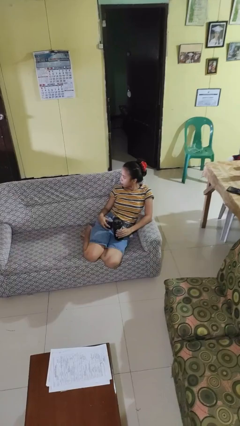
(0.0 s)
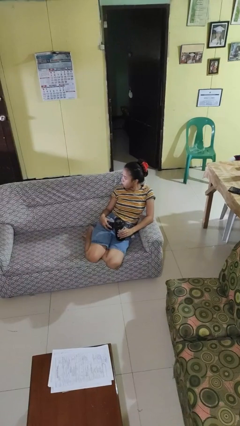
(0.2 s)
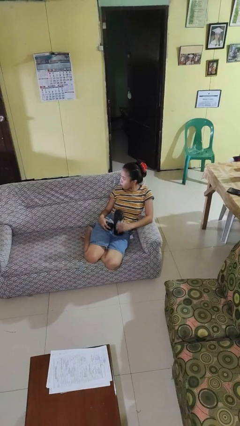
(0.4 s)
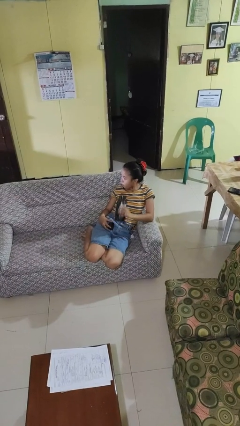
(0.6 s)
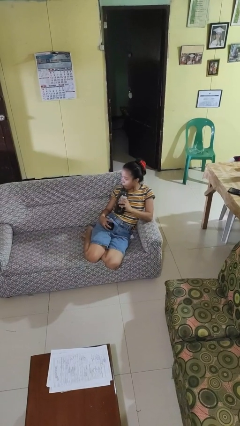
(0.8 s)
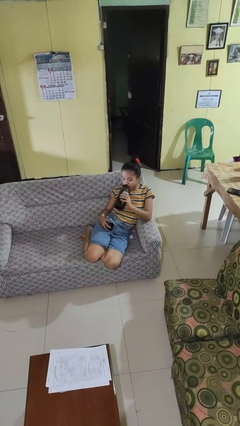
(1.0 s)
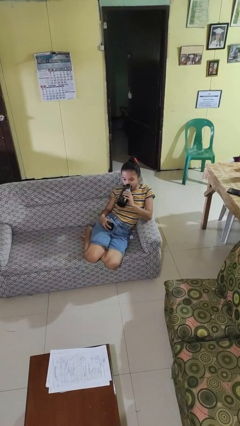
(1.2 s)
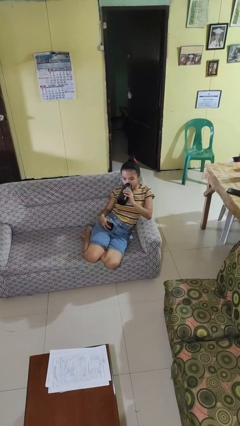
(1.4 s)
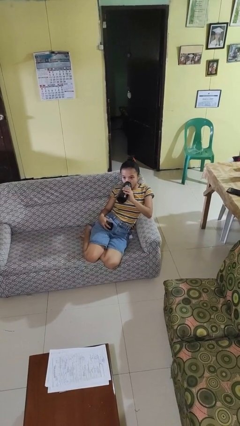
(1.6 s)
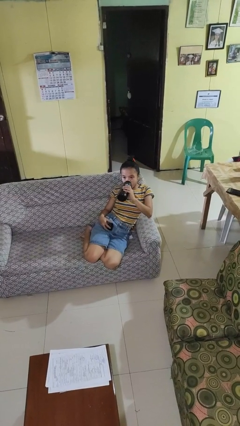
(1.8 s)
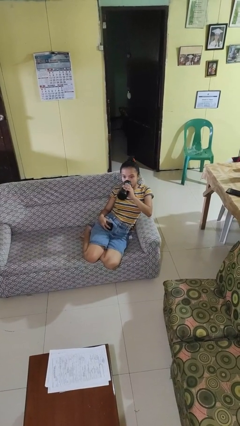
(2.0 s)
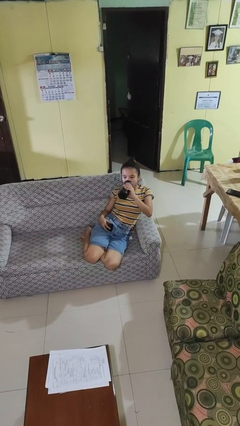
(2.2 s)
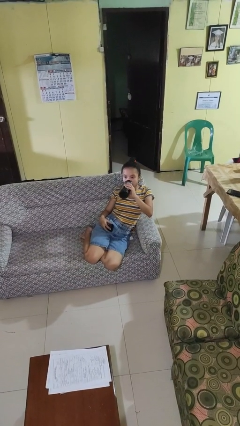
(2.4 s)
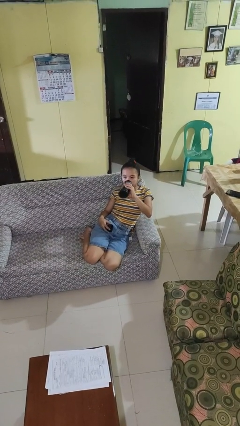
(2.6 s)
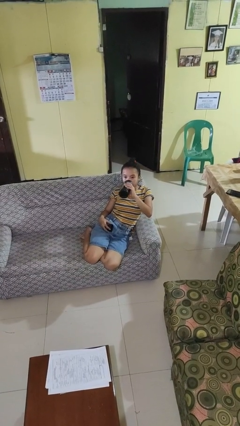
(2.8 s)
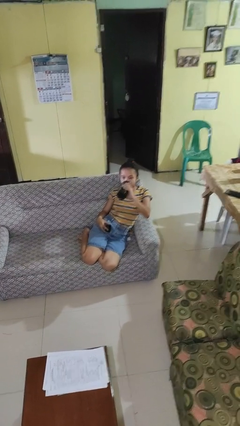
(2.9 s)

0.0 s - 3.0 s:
person drinks from bottle

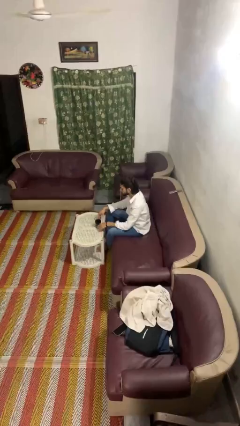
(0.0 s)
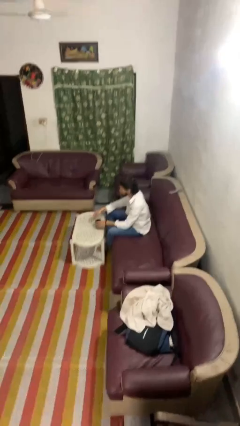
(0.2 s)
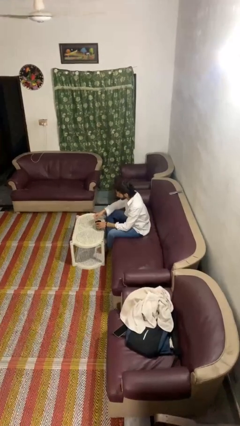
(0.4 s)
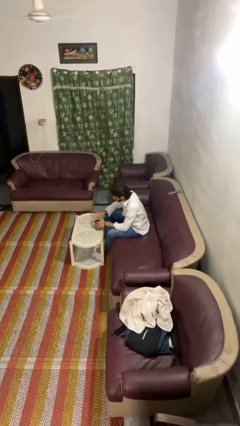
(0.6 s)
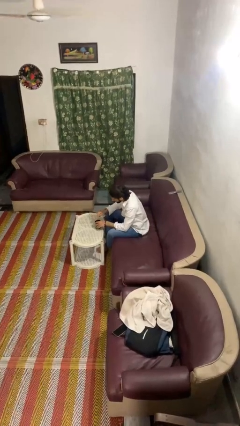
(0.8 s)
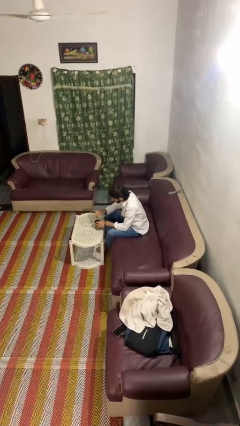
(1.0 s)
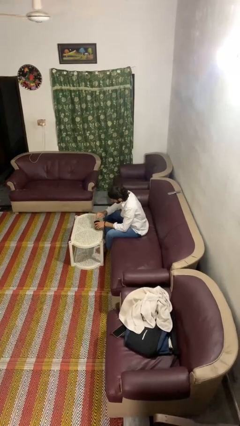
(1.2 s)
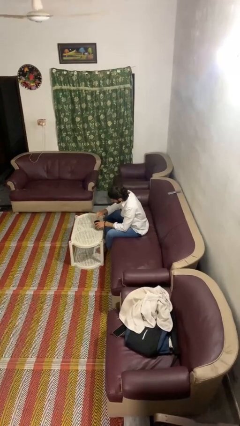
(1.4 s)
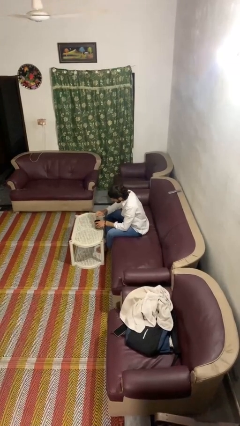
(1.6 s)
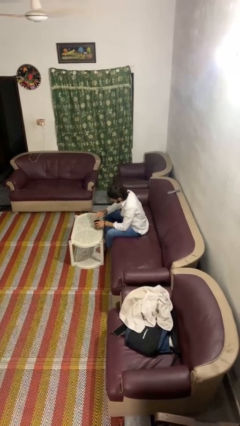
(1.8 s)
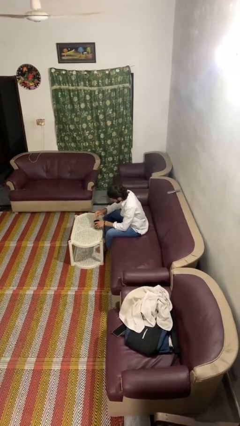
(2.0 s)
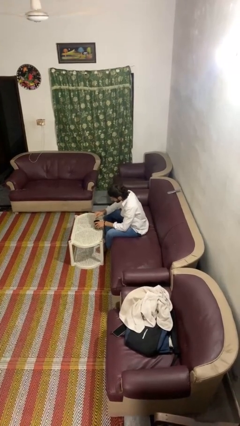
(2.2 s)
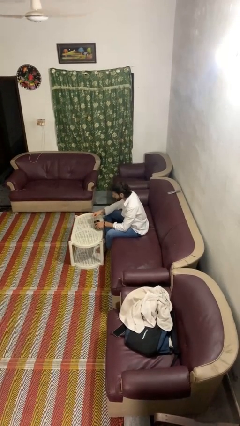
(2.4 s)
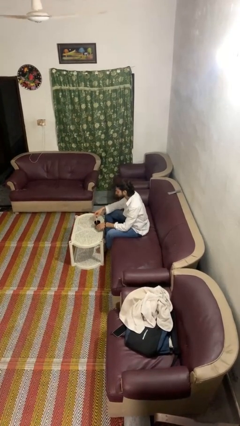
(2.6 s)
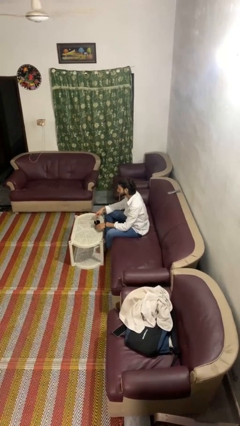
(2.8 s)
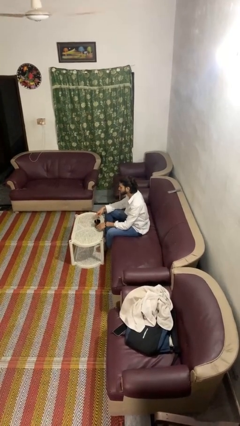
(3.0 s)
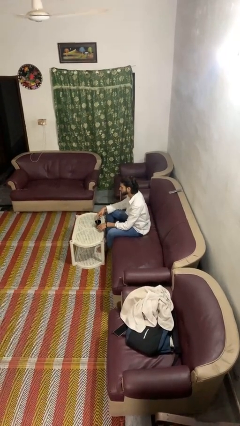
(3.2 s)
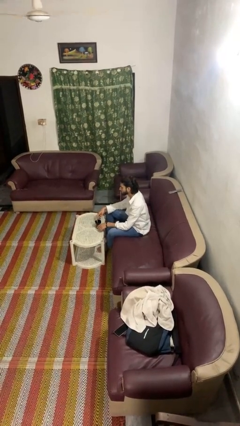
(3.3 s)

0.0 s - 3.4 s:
person stirs mug

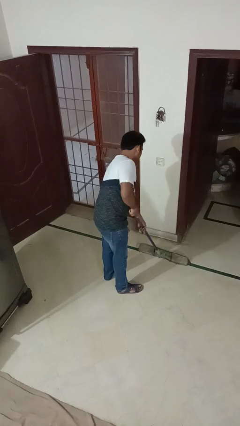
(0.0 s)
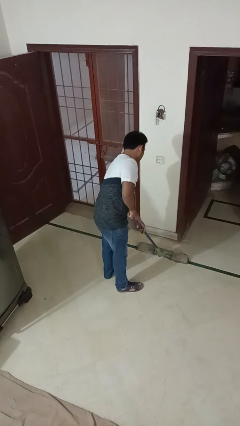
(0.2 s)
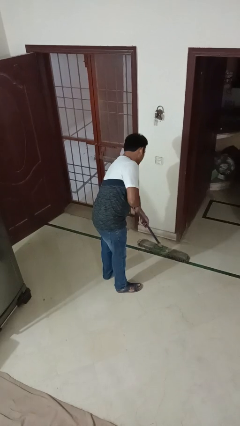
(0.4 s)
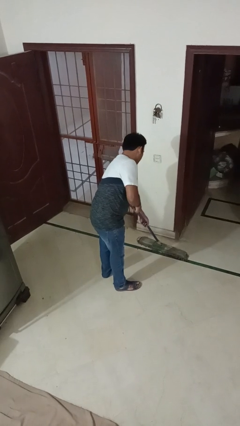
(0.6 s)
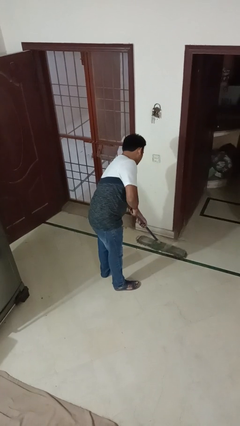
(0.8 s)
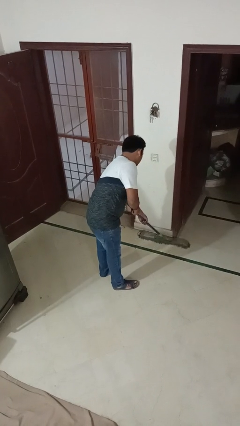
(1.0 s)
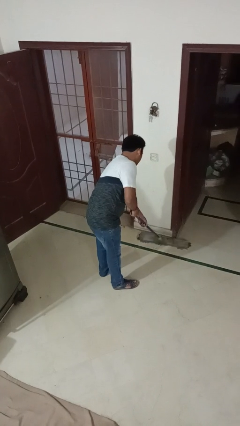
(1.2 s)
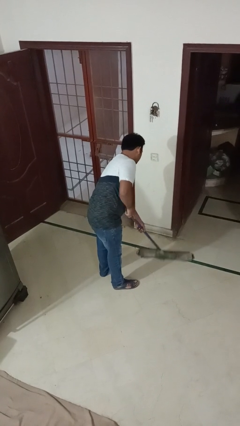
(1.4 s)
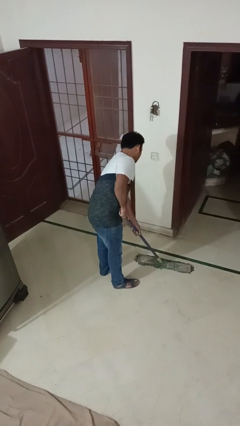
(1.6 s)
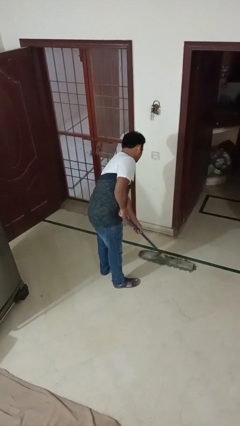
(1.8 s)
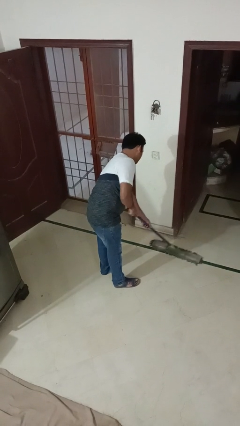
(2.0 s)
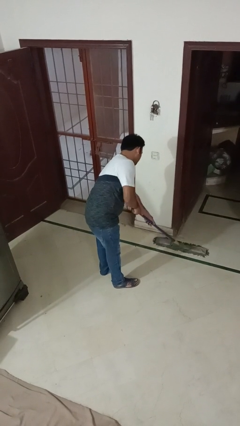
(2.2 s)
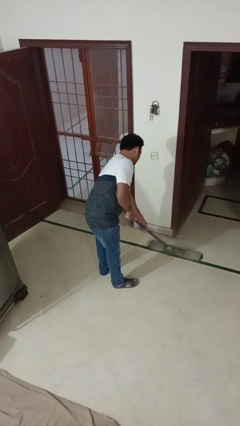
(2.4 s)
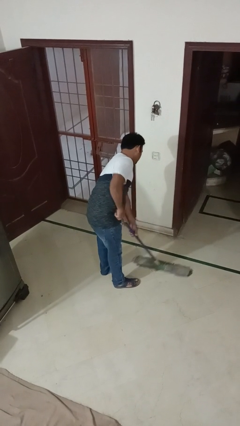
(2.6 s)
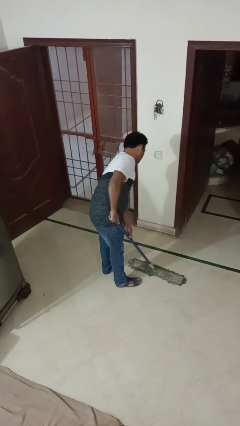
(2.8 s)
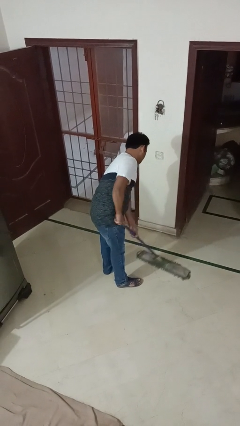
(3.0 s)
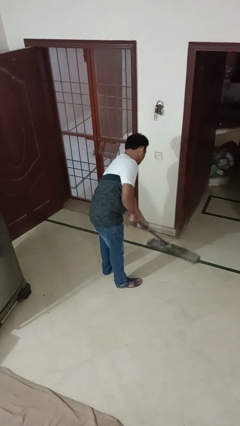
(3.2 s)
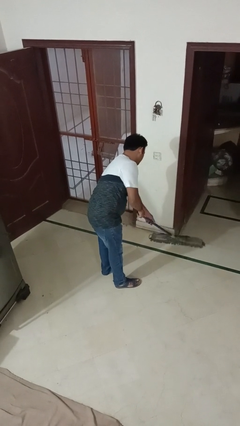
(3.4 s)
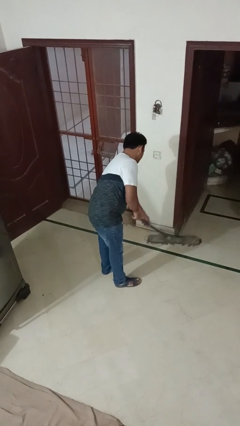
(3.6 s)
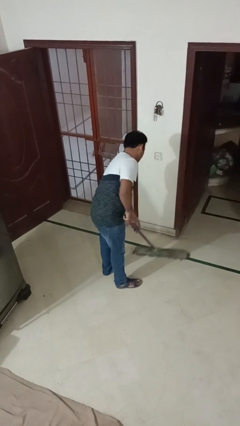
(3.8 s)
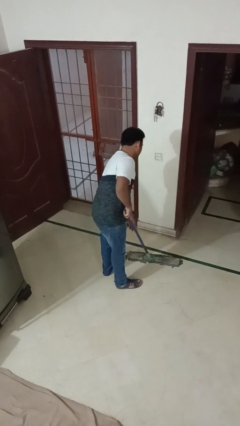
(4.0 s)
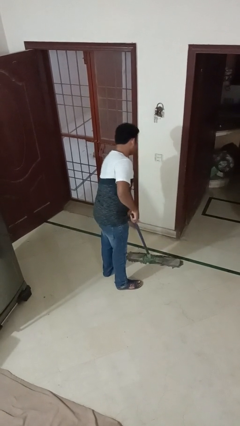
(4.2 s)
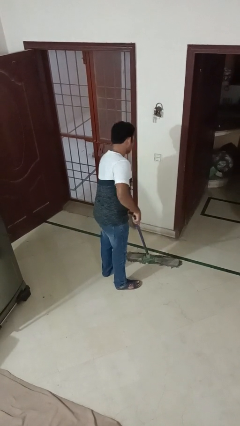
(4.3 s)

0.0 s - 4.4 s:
person mops

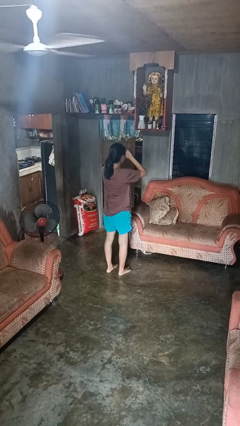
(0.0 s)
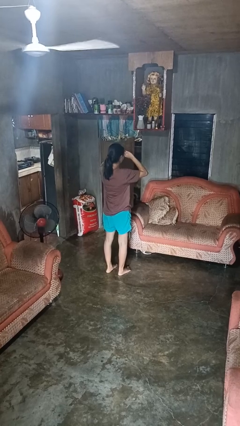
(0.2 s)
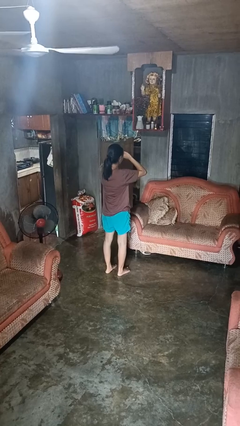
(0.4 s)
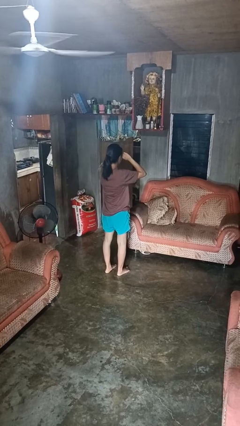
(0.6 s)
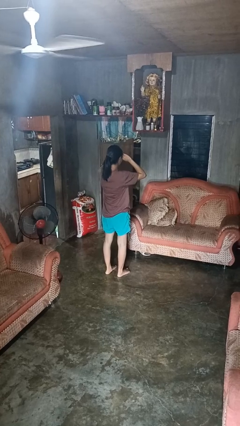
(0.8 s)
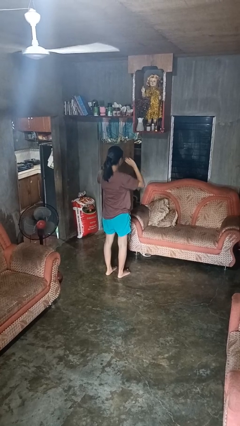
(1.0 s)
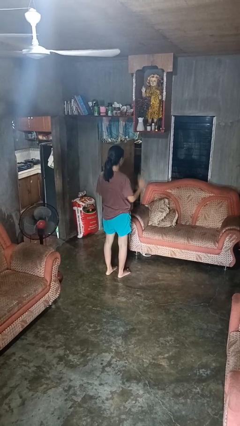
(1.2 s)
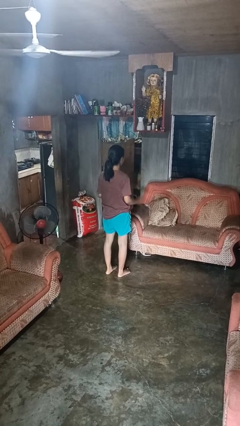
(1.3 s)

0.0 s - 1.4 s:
person rubs eyes

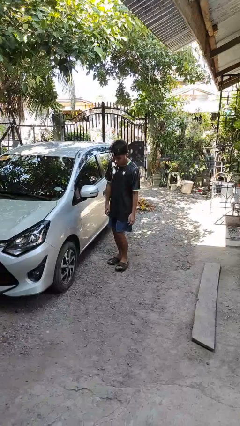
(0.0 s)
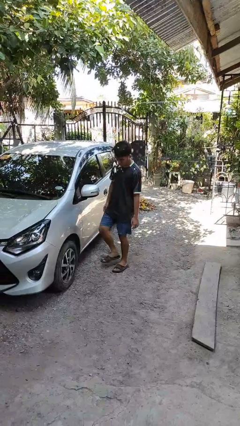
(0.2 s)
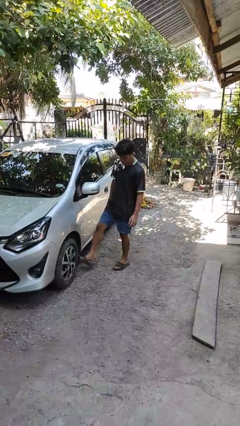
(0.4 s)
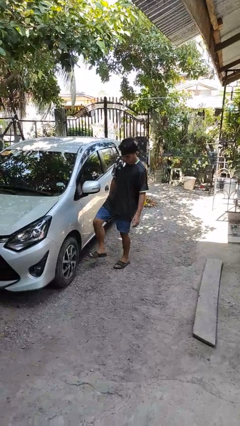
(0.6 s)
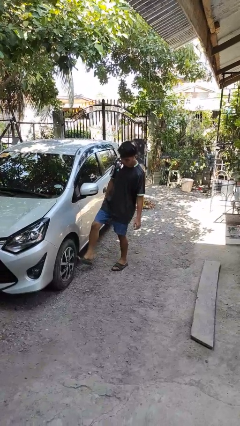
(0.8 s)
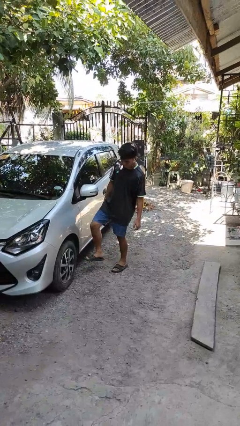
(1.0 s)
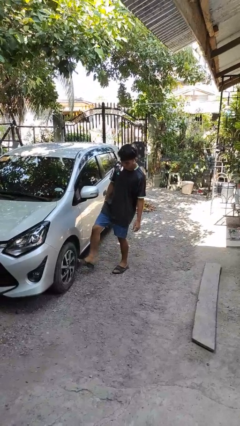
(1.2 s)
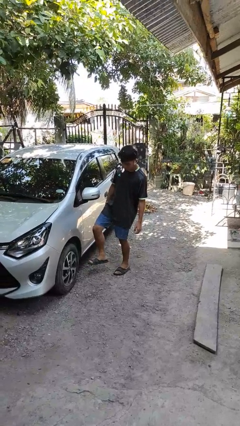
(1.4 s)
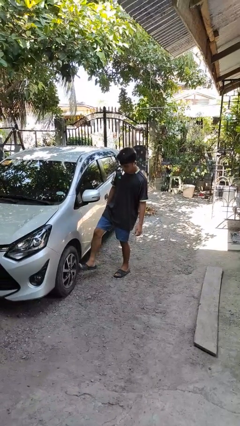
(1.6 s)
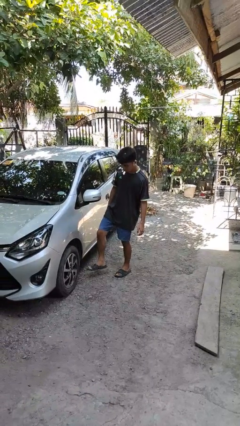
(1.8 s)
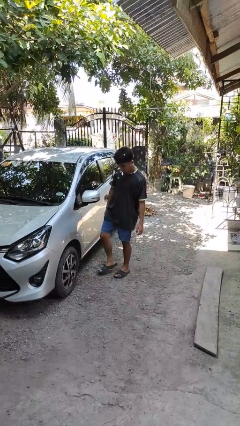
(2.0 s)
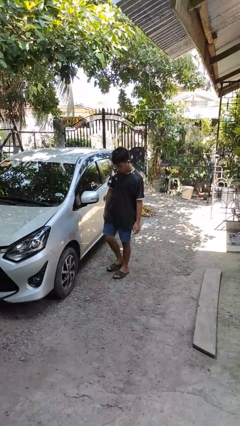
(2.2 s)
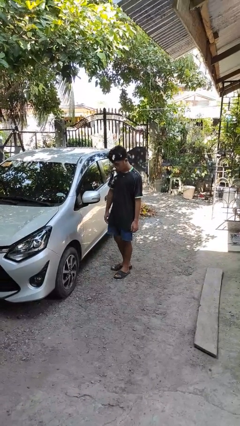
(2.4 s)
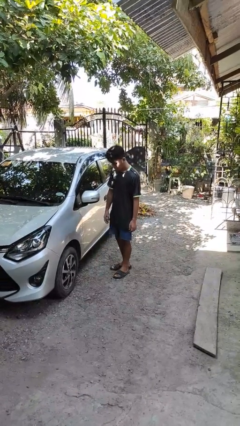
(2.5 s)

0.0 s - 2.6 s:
person kicks car tires

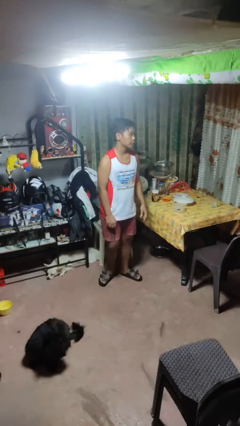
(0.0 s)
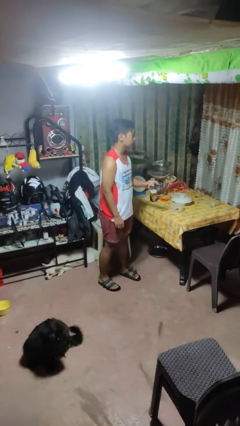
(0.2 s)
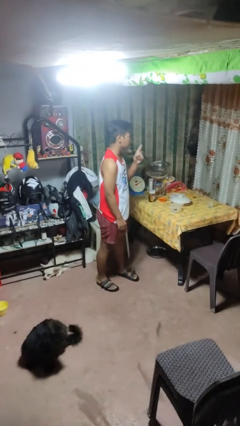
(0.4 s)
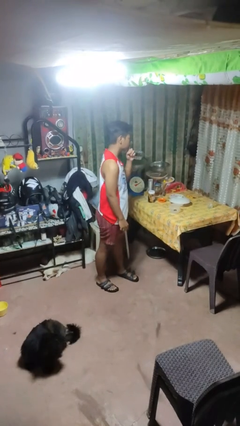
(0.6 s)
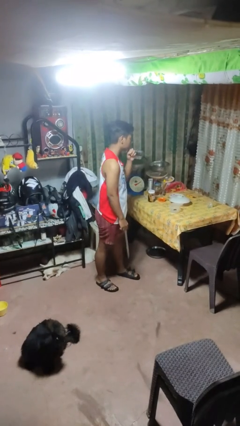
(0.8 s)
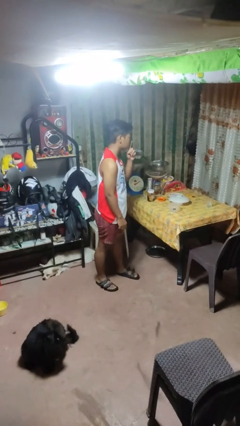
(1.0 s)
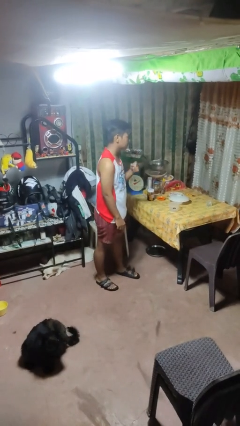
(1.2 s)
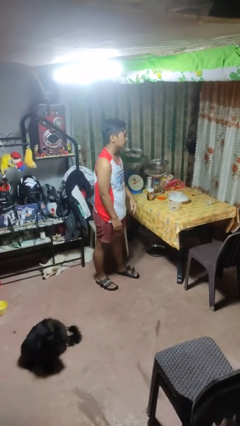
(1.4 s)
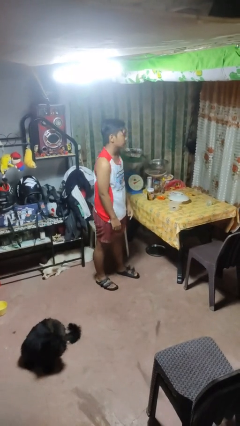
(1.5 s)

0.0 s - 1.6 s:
person gestures be quiet

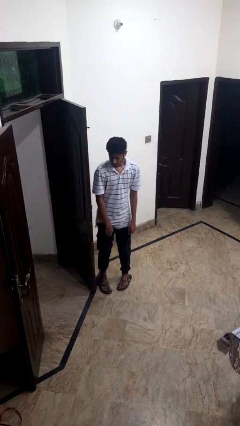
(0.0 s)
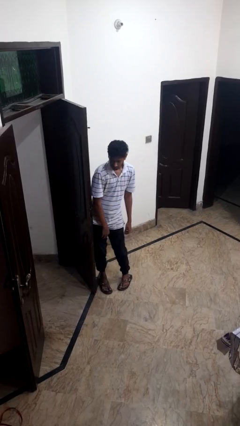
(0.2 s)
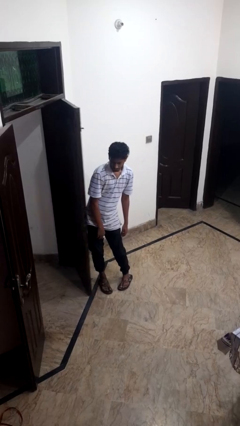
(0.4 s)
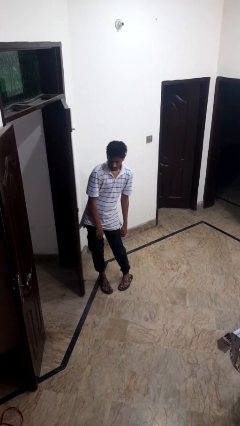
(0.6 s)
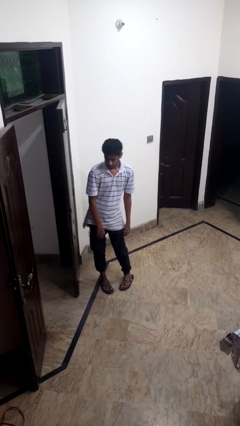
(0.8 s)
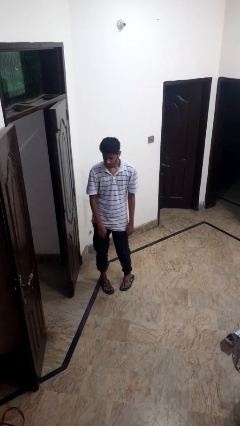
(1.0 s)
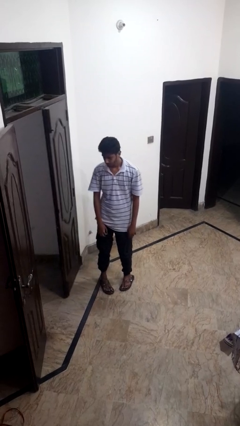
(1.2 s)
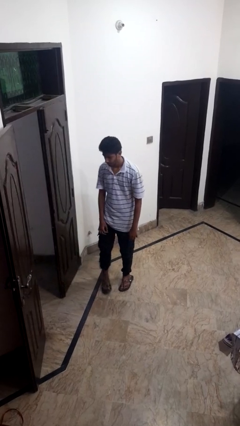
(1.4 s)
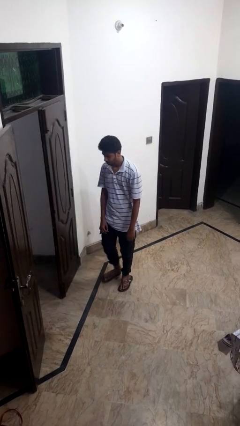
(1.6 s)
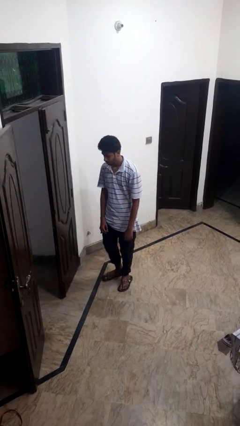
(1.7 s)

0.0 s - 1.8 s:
person closes door with hip
